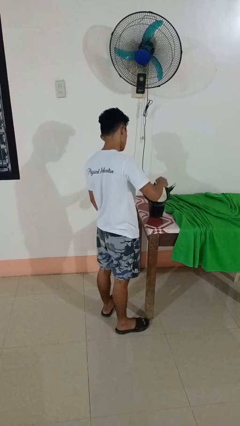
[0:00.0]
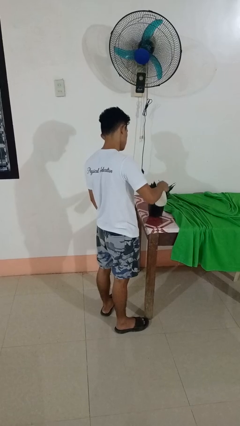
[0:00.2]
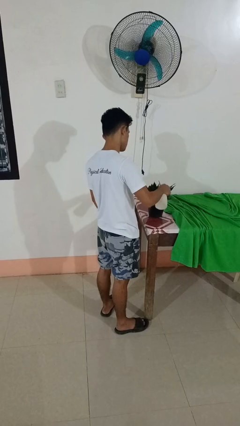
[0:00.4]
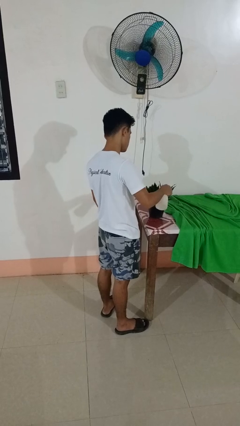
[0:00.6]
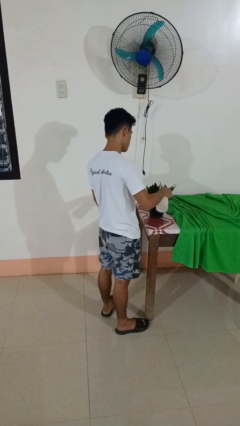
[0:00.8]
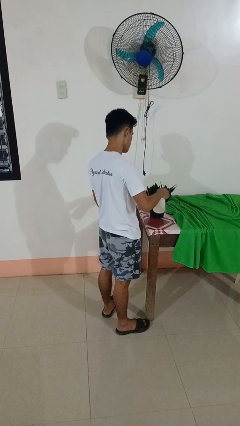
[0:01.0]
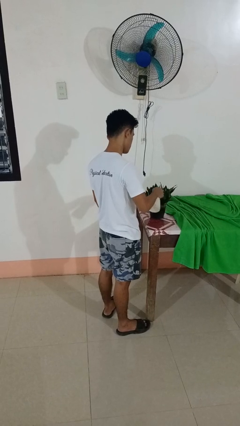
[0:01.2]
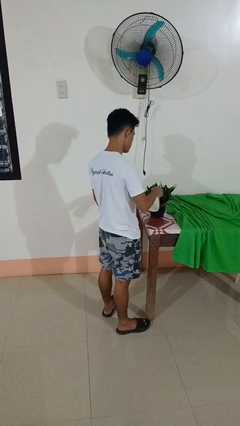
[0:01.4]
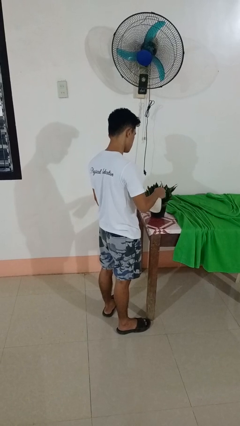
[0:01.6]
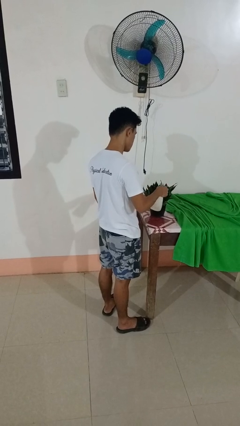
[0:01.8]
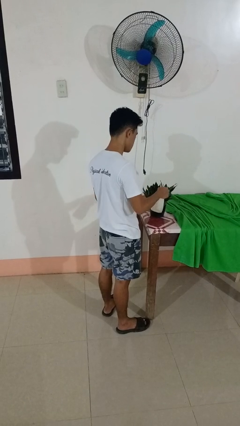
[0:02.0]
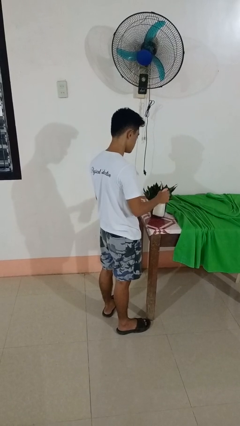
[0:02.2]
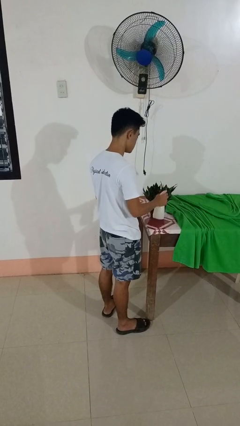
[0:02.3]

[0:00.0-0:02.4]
person waters houseplant

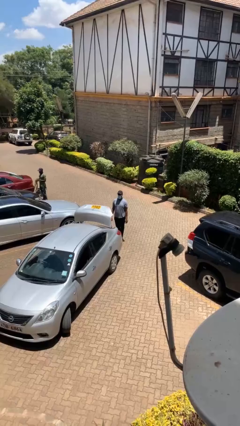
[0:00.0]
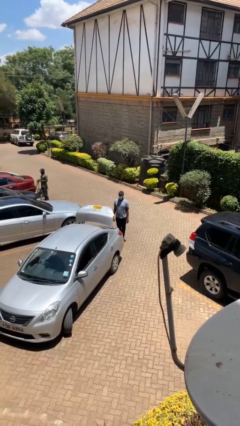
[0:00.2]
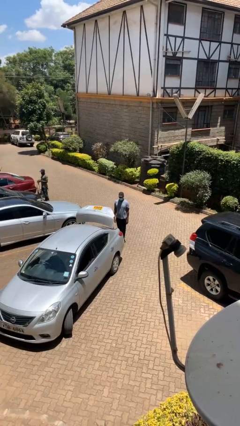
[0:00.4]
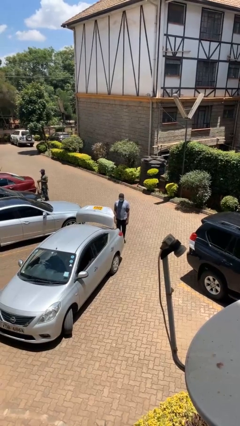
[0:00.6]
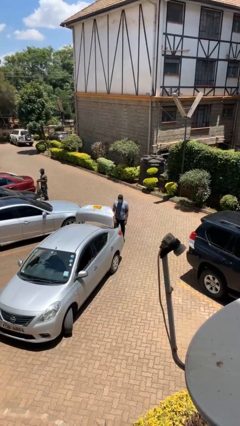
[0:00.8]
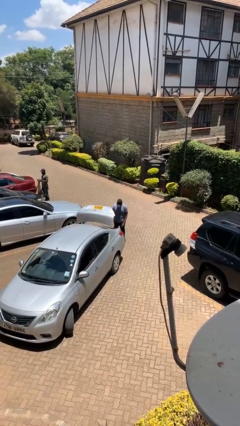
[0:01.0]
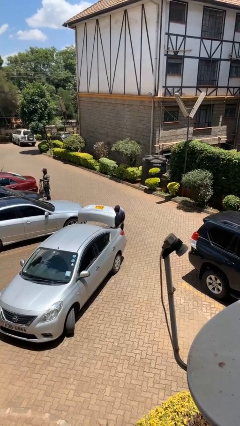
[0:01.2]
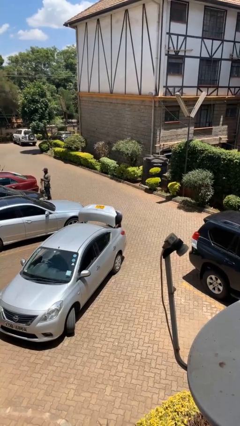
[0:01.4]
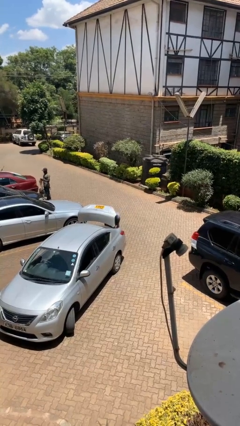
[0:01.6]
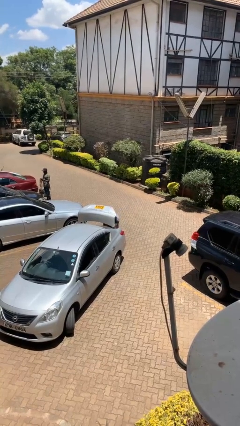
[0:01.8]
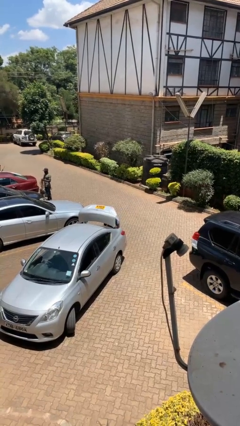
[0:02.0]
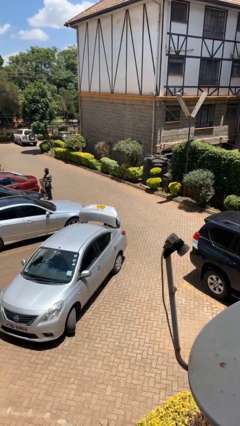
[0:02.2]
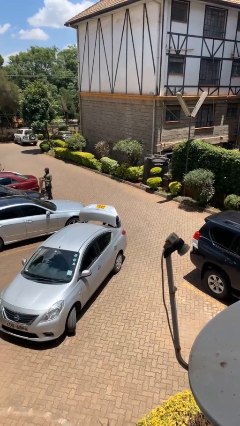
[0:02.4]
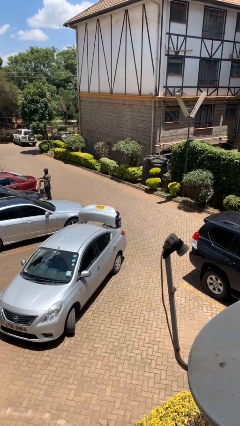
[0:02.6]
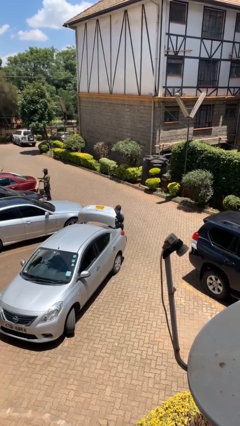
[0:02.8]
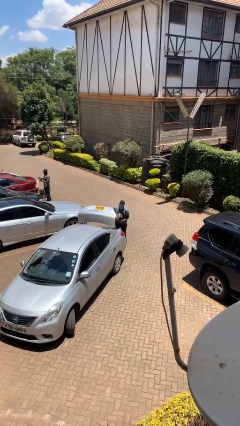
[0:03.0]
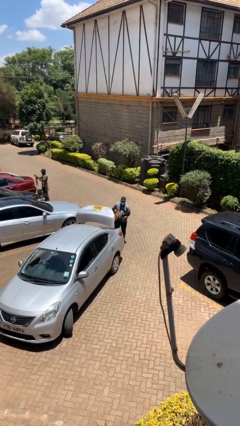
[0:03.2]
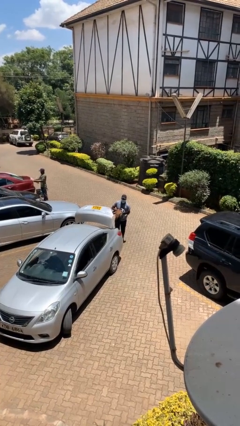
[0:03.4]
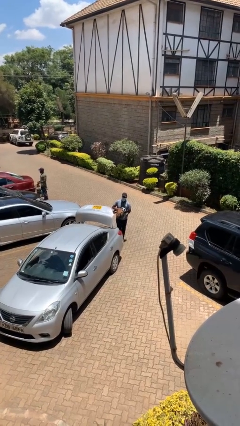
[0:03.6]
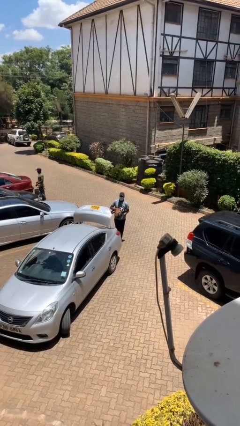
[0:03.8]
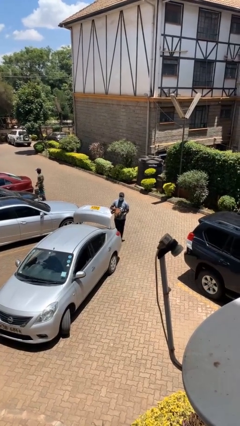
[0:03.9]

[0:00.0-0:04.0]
person unloads car

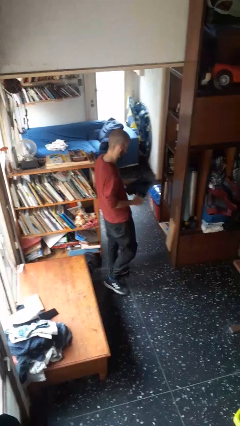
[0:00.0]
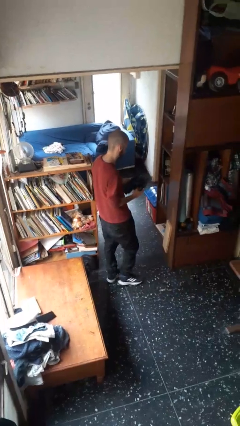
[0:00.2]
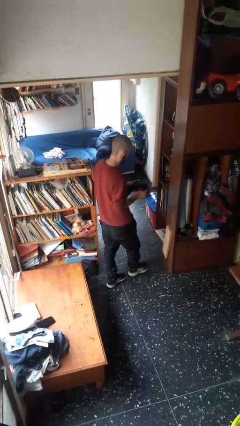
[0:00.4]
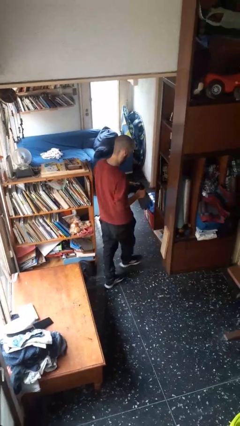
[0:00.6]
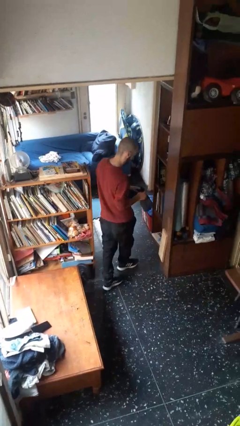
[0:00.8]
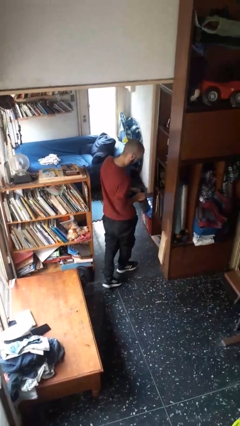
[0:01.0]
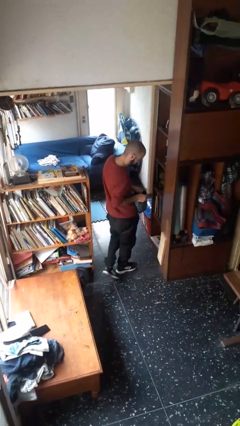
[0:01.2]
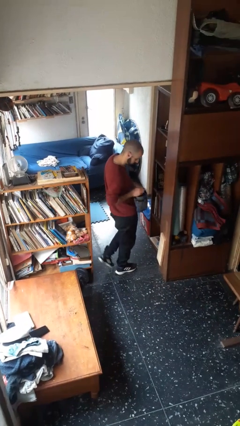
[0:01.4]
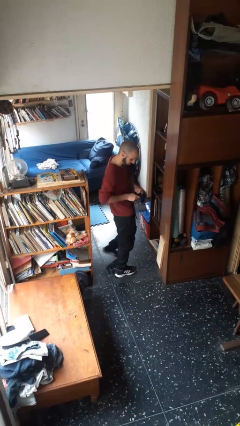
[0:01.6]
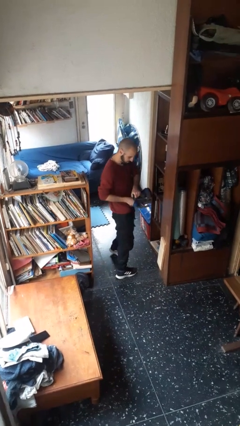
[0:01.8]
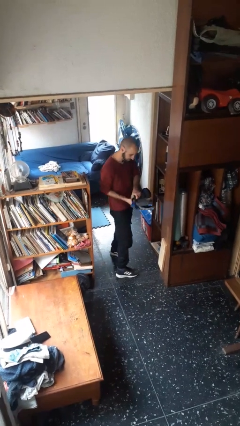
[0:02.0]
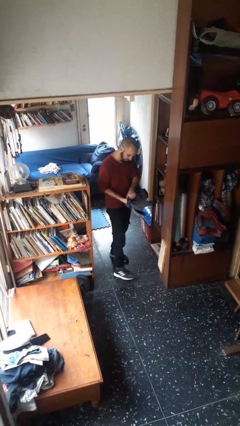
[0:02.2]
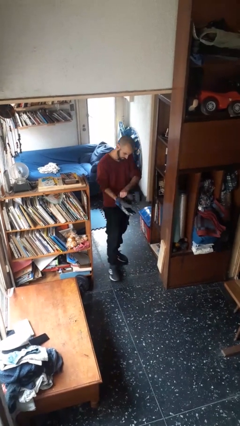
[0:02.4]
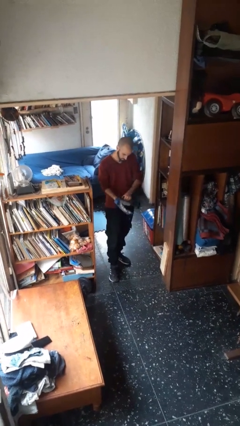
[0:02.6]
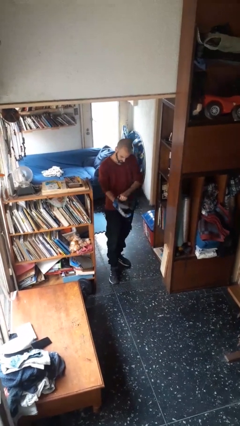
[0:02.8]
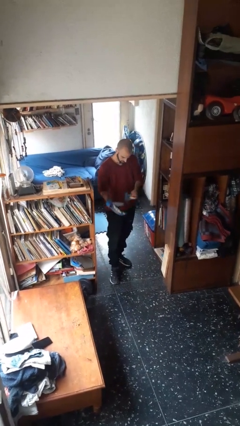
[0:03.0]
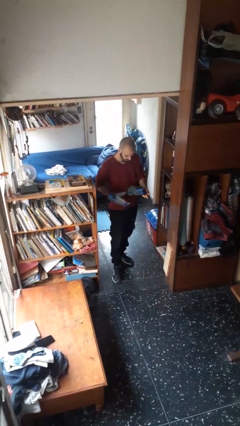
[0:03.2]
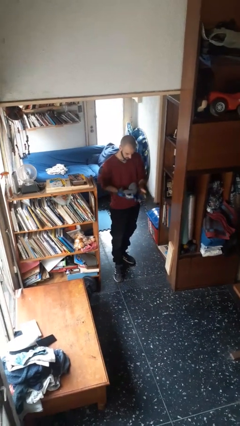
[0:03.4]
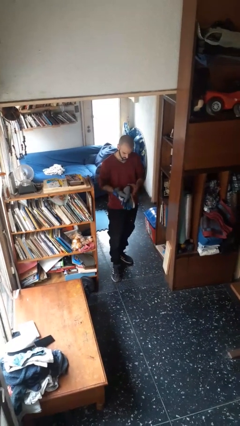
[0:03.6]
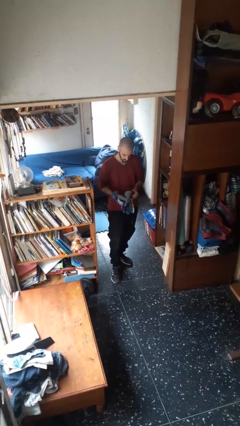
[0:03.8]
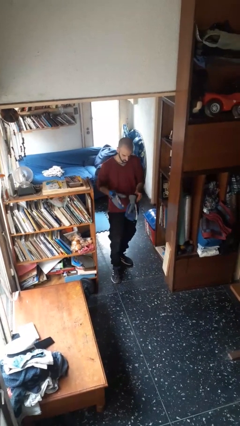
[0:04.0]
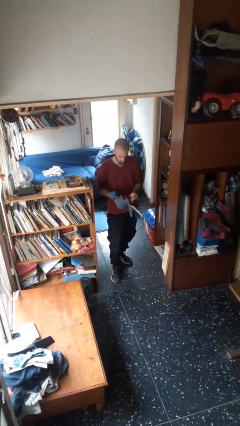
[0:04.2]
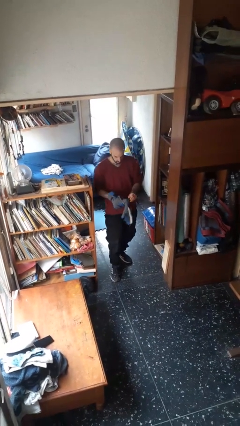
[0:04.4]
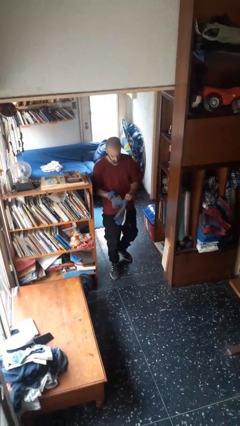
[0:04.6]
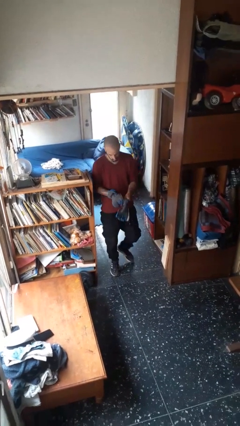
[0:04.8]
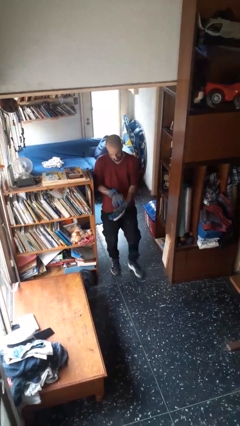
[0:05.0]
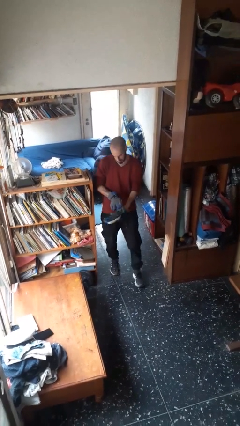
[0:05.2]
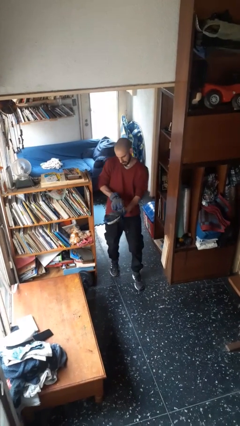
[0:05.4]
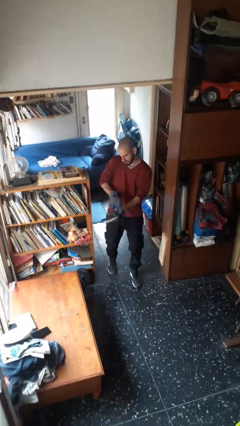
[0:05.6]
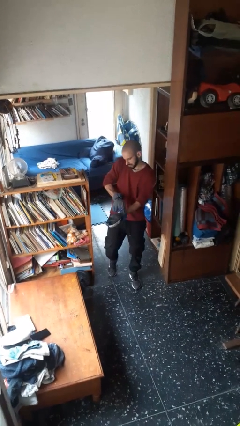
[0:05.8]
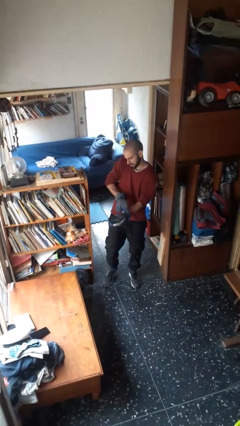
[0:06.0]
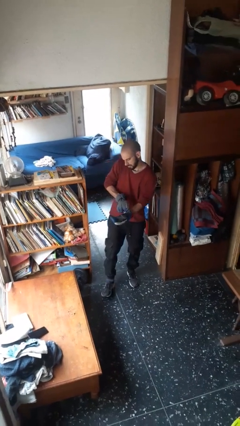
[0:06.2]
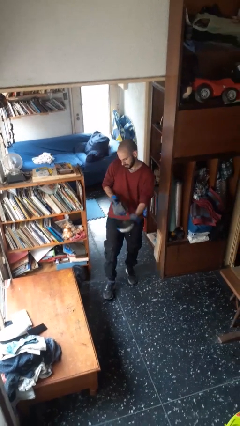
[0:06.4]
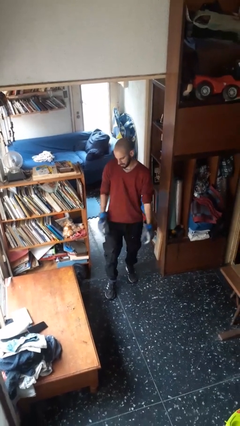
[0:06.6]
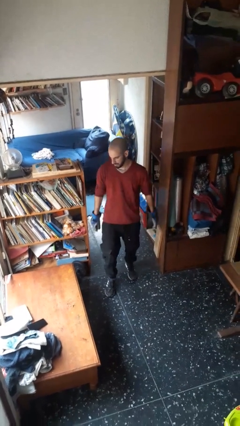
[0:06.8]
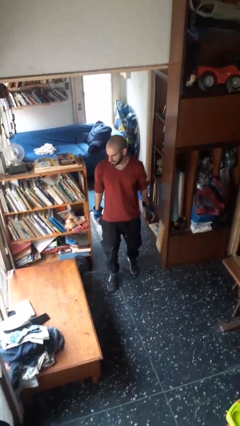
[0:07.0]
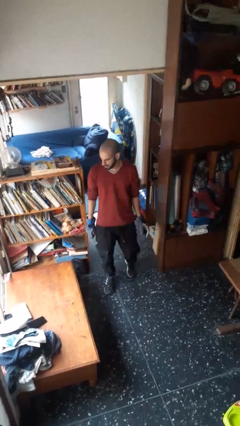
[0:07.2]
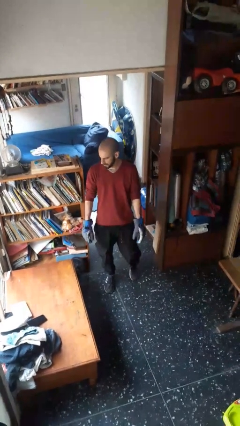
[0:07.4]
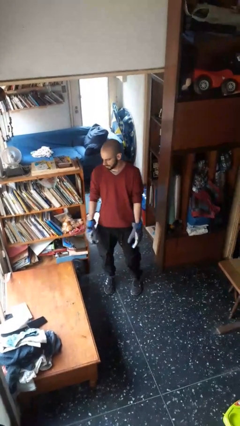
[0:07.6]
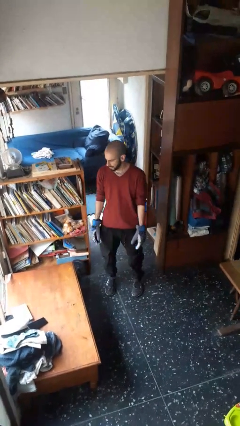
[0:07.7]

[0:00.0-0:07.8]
person puts on gloves

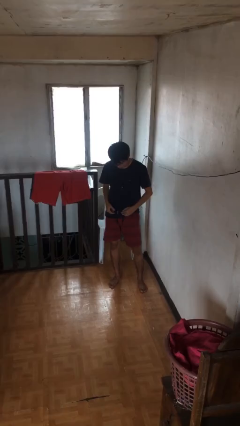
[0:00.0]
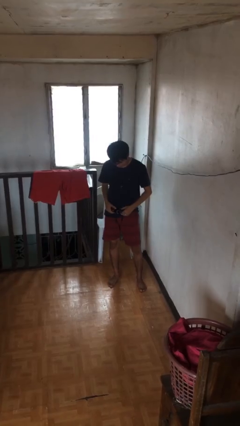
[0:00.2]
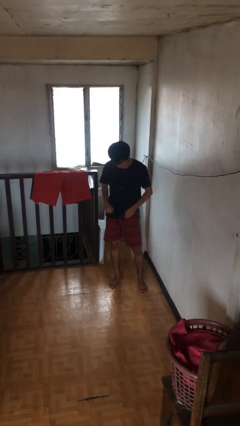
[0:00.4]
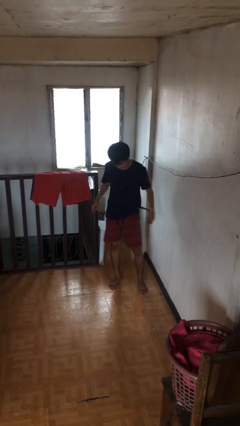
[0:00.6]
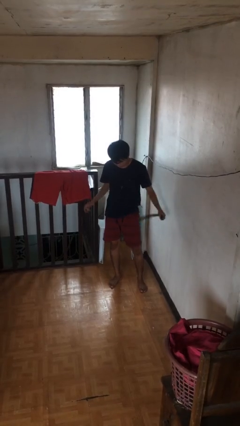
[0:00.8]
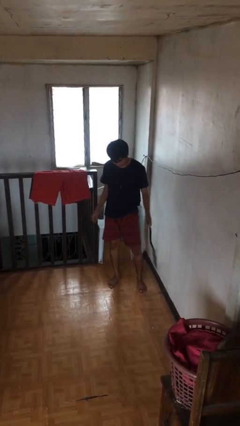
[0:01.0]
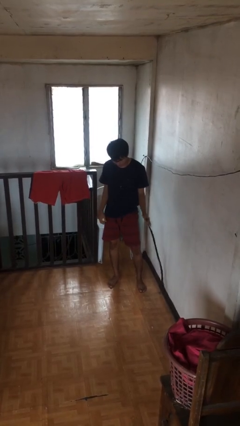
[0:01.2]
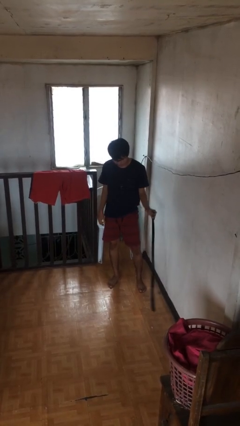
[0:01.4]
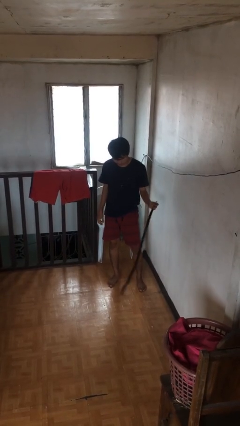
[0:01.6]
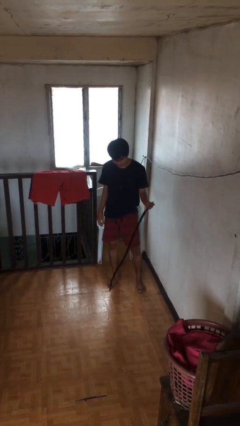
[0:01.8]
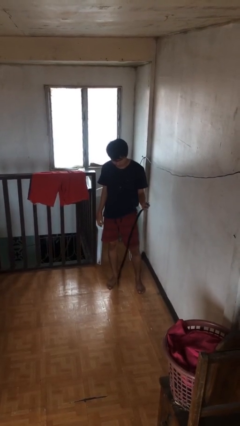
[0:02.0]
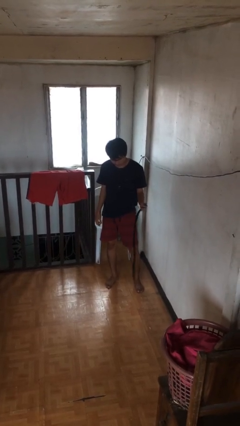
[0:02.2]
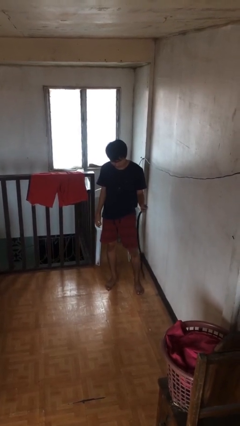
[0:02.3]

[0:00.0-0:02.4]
person takes off belt

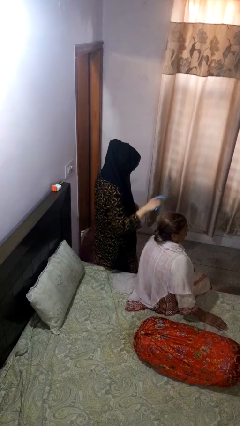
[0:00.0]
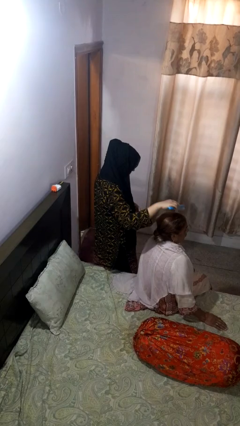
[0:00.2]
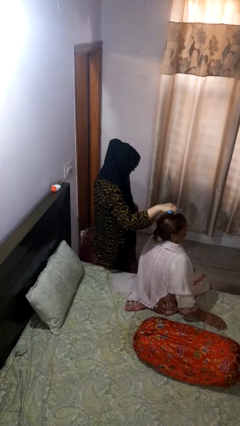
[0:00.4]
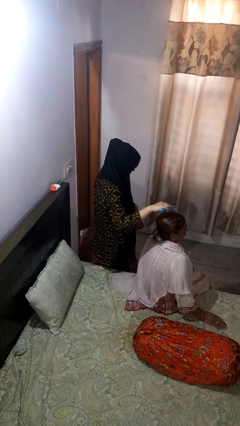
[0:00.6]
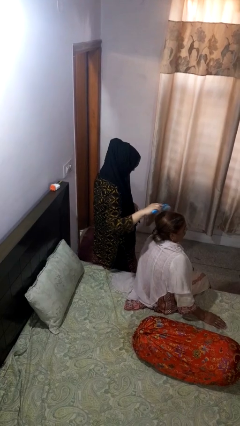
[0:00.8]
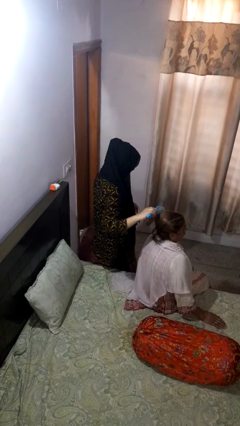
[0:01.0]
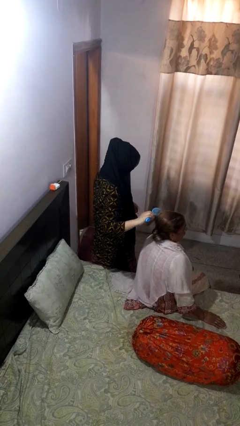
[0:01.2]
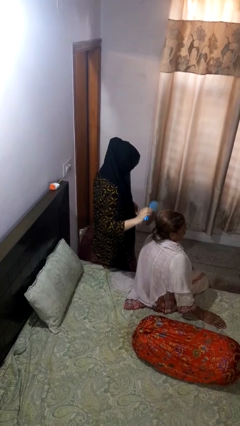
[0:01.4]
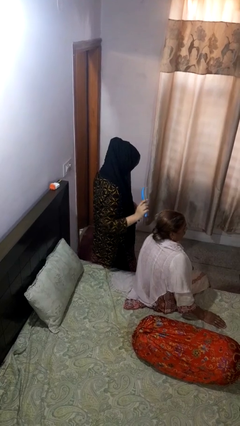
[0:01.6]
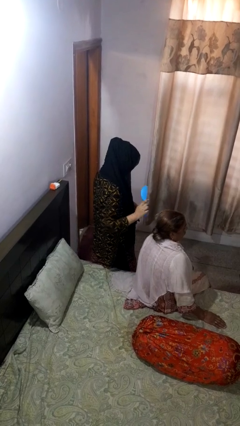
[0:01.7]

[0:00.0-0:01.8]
person brushes hair of person
